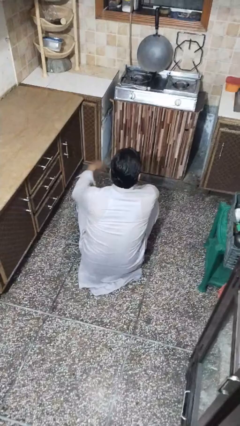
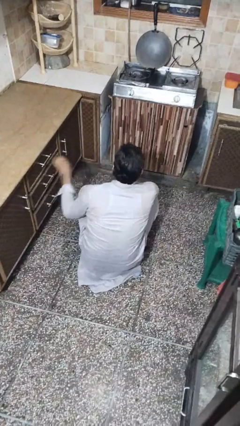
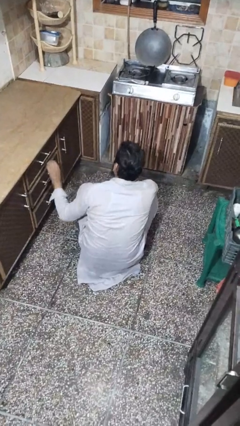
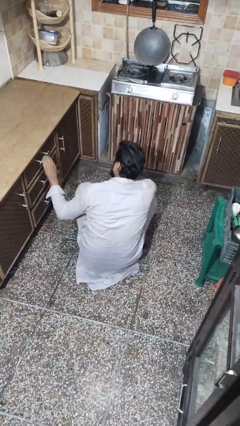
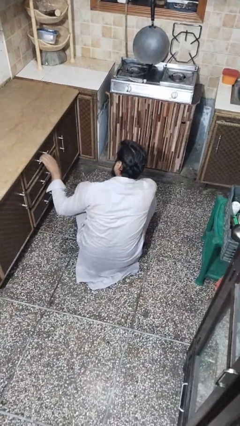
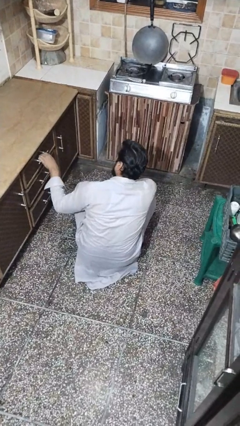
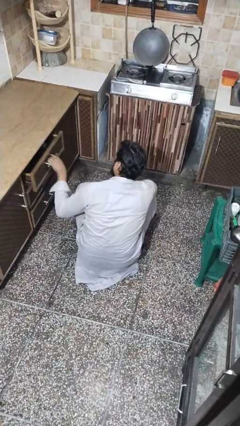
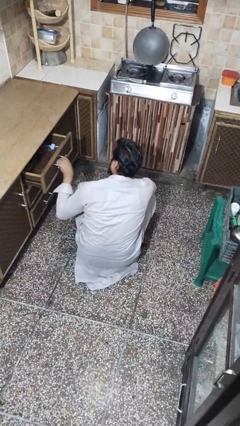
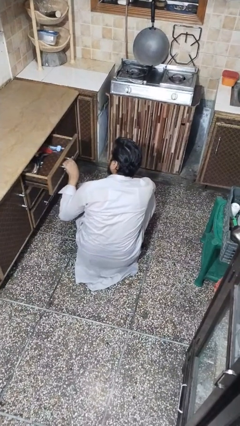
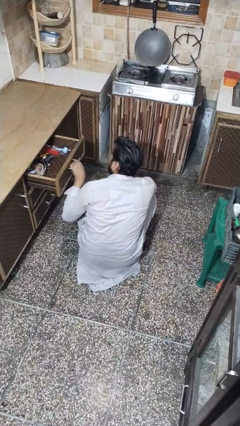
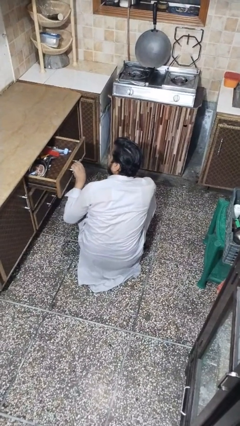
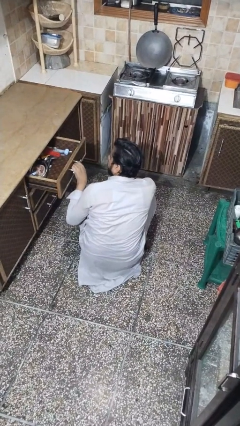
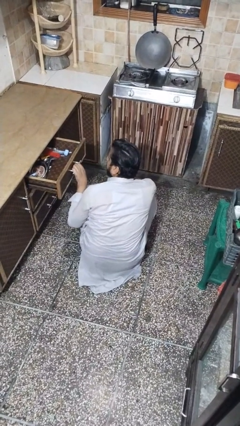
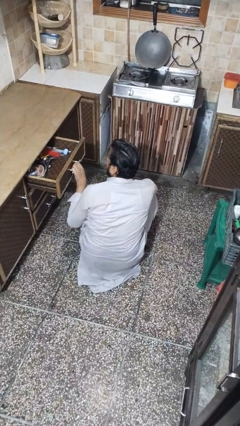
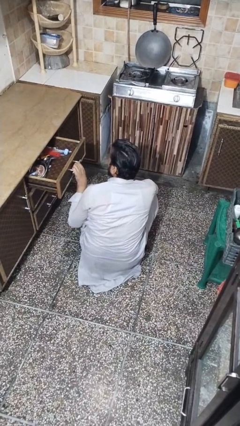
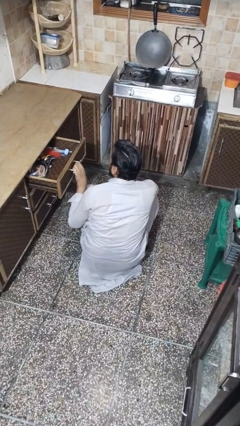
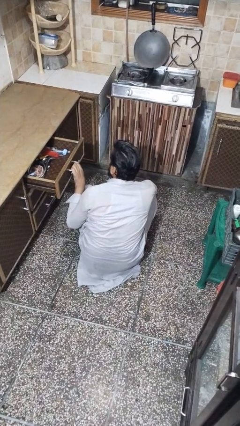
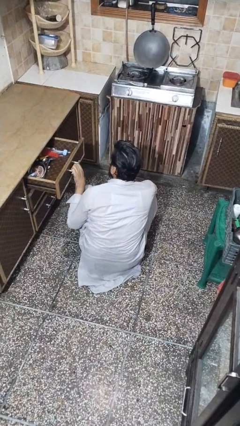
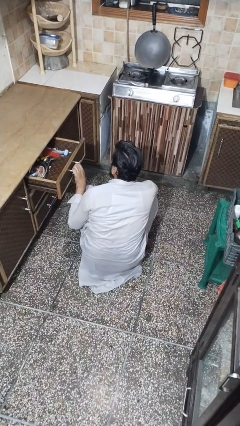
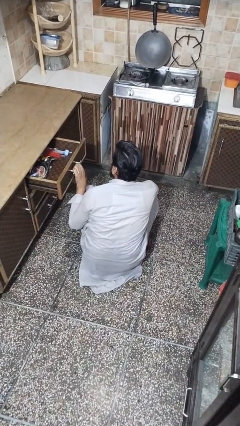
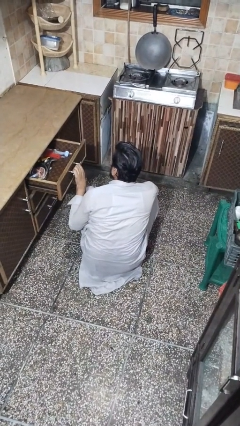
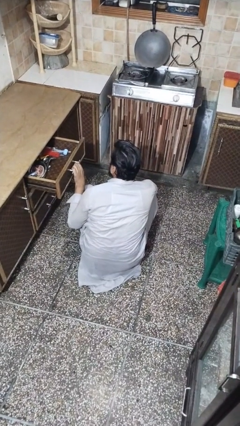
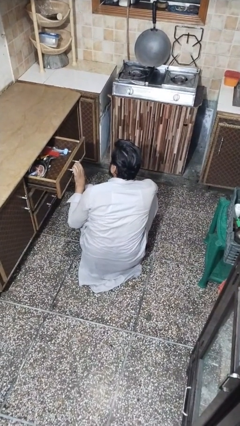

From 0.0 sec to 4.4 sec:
person opens kitchen drawer

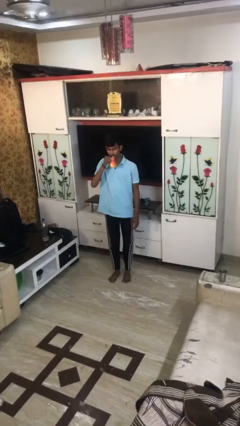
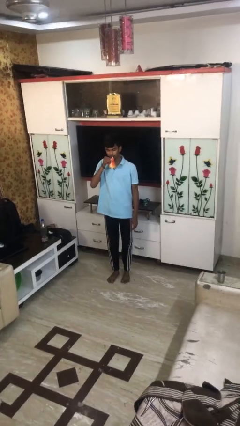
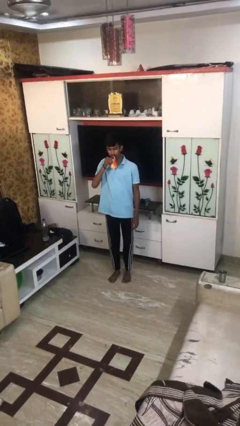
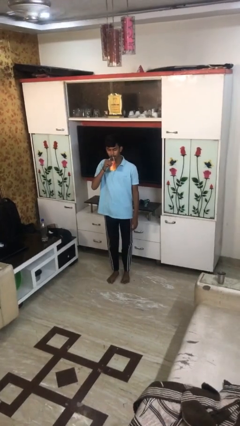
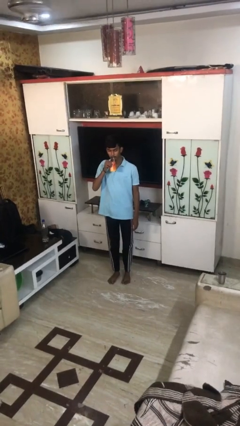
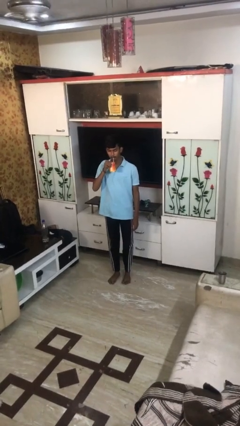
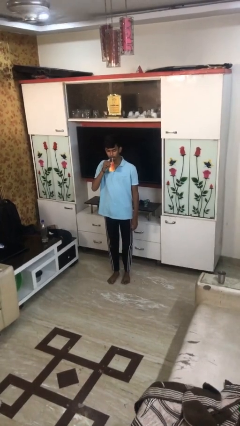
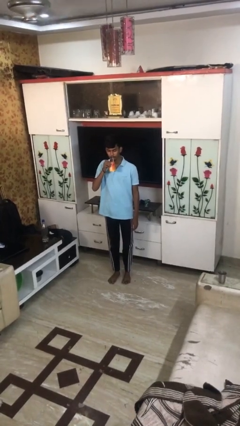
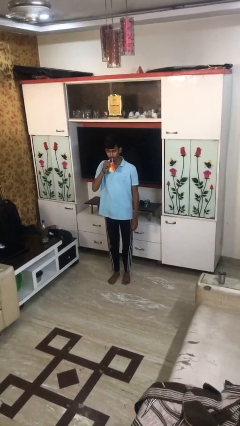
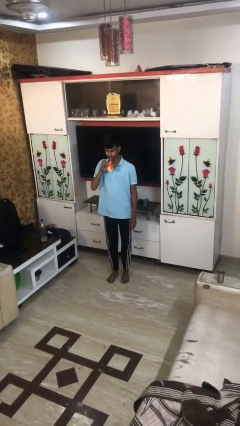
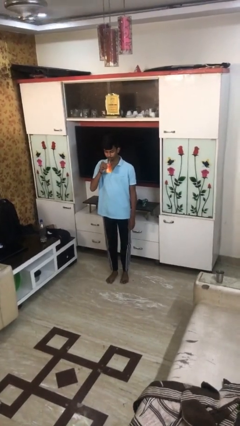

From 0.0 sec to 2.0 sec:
person drinks from straw

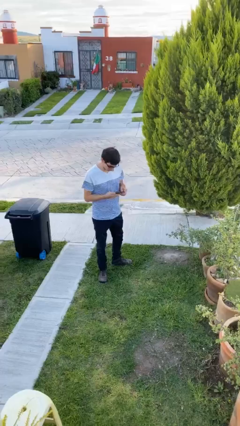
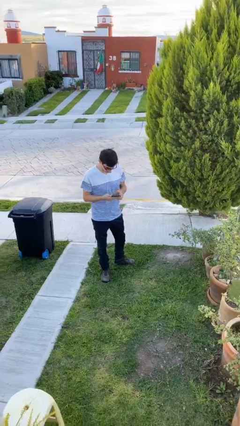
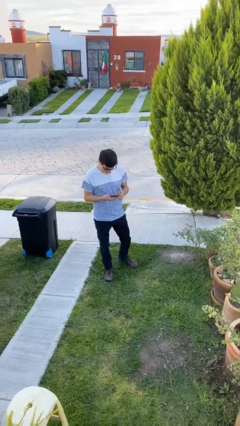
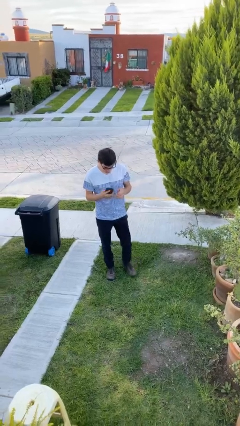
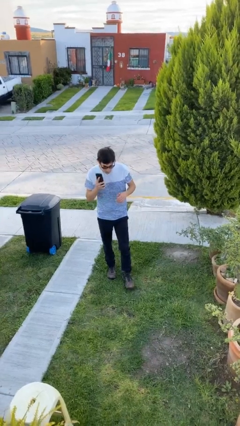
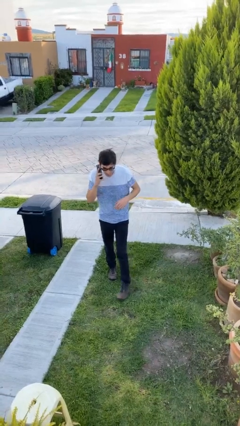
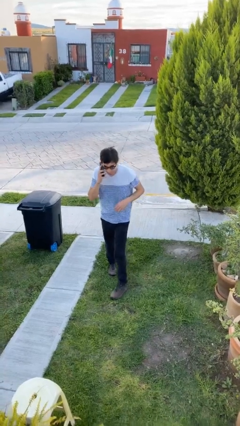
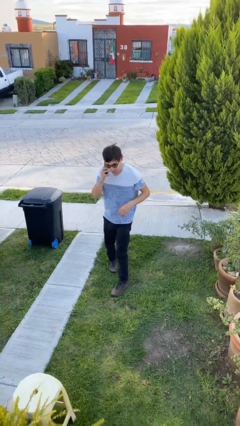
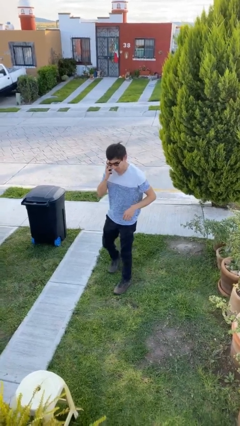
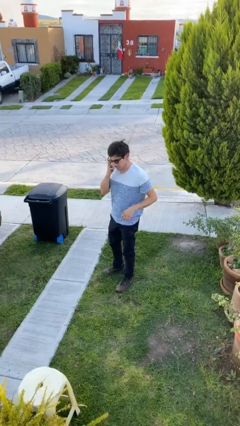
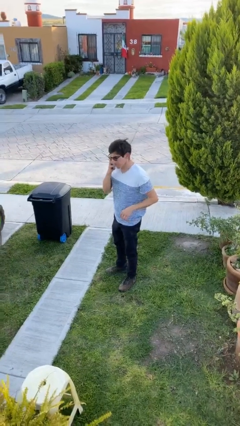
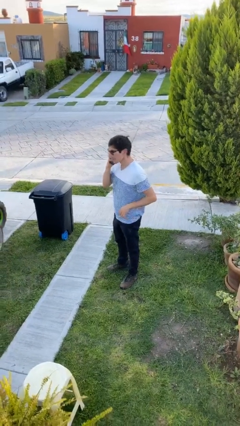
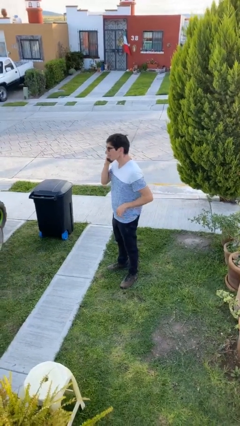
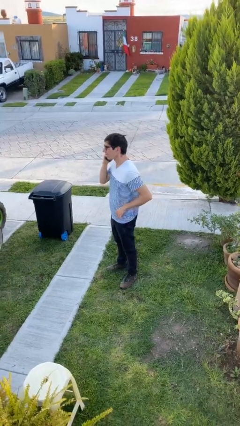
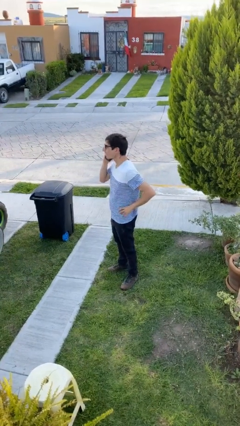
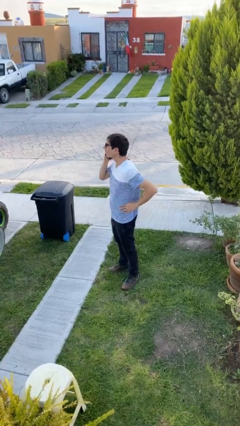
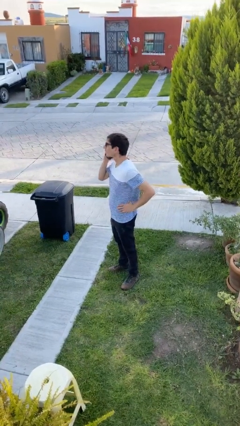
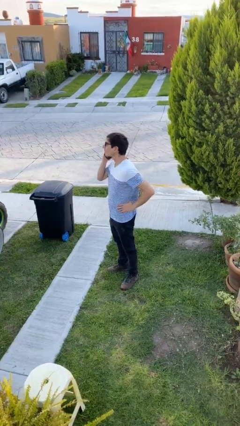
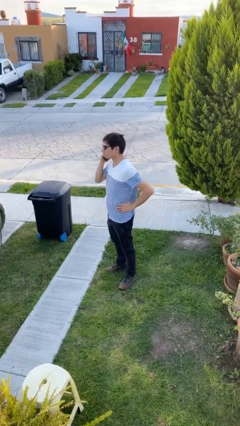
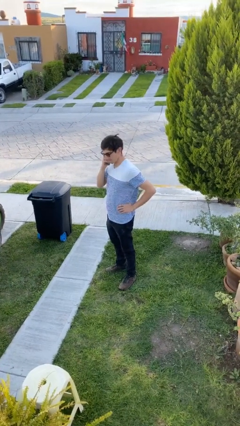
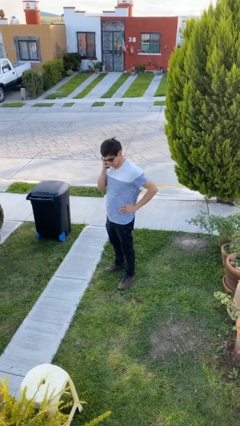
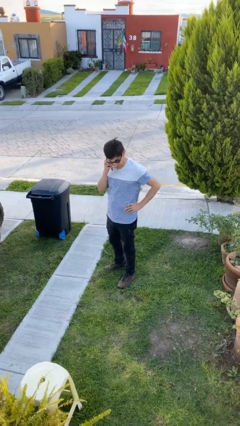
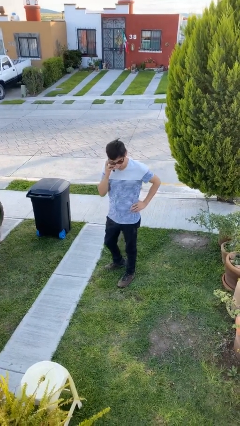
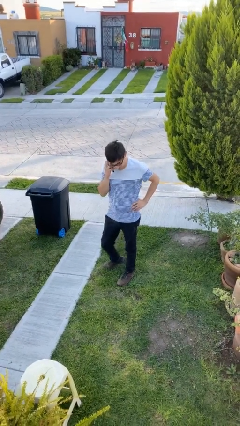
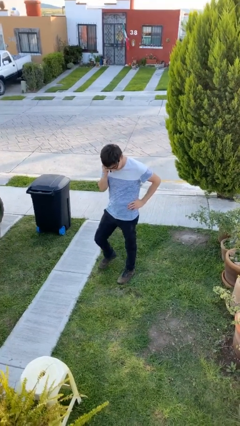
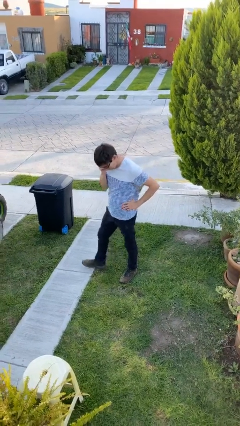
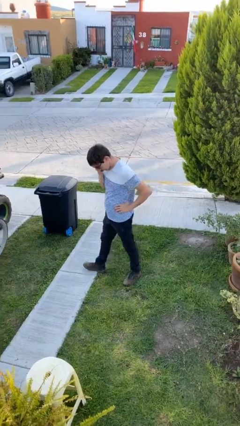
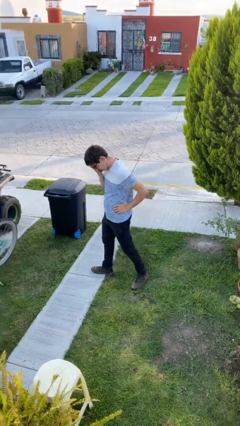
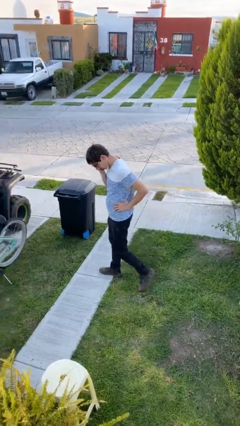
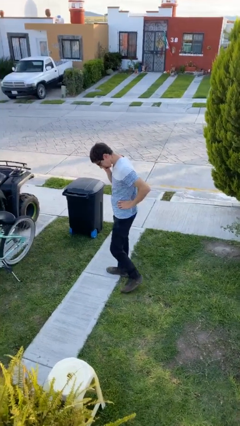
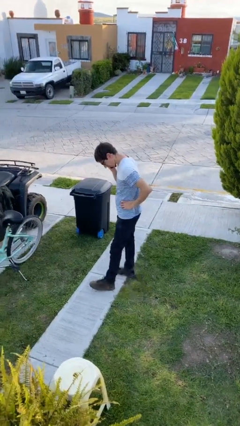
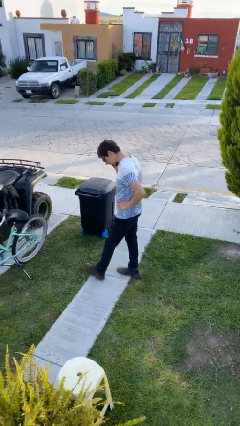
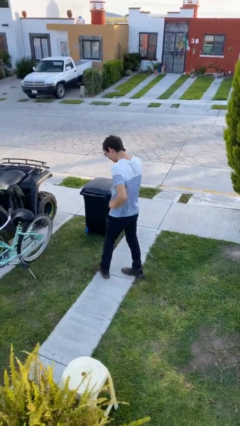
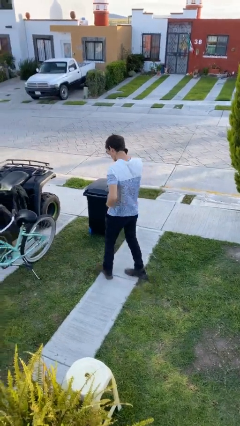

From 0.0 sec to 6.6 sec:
person talks on phone

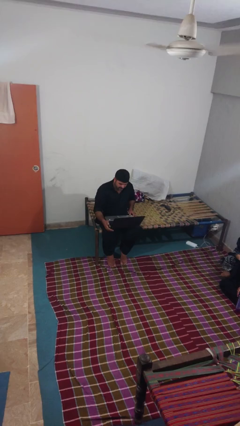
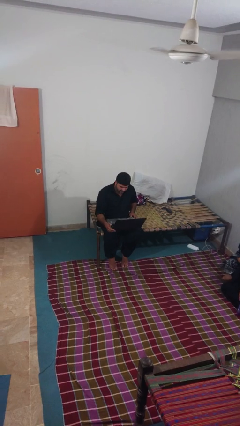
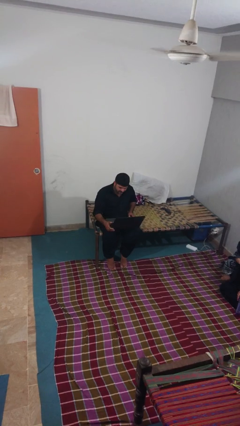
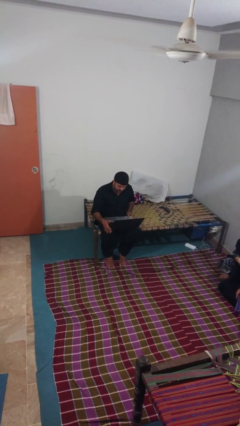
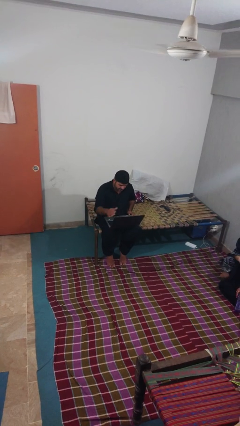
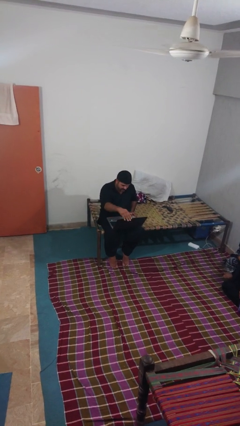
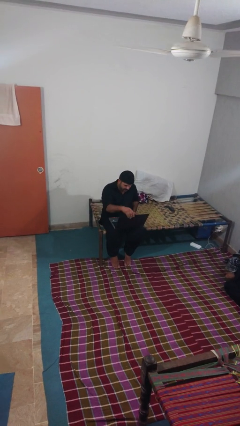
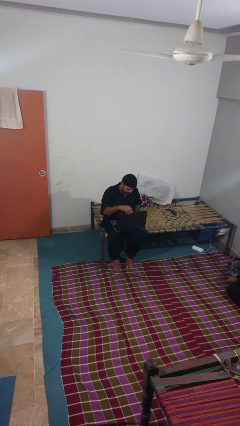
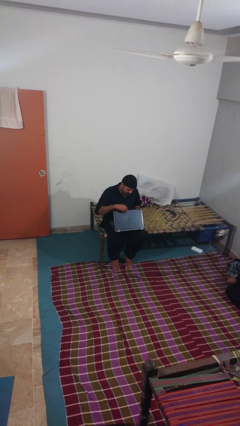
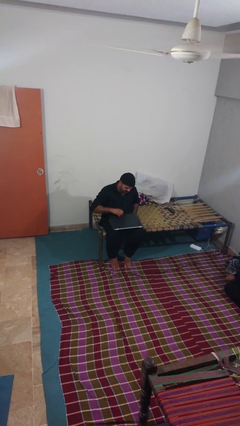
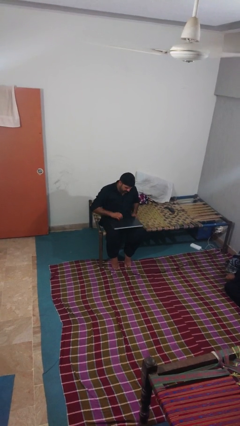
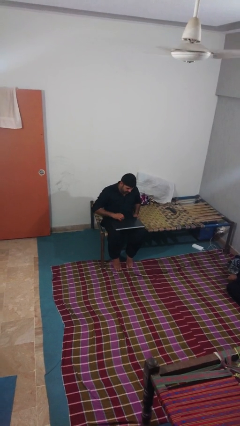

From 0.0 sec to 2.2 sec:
person closes laptop

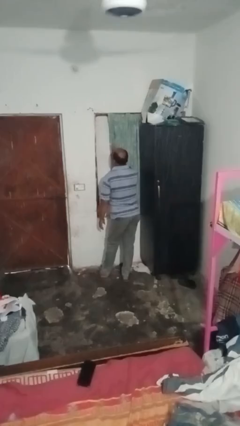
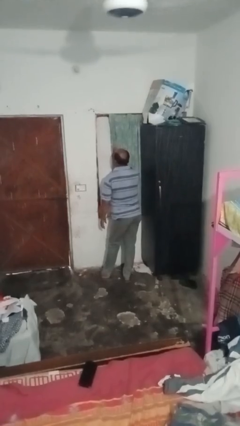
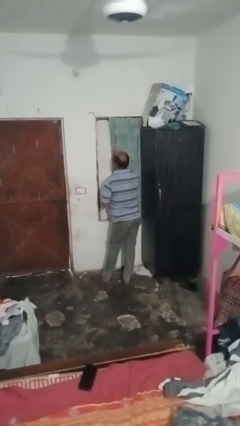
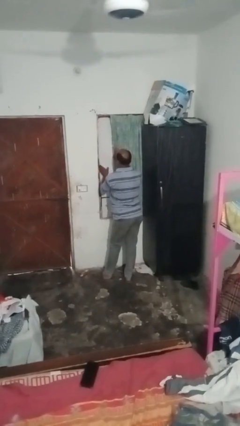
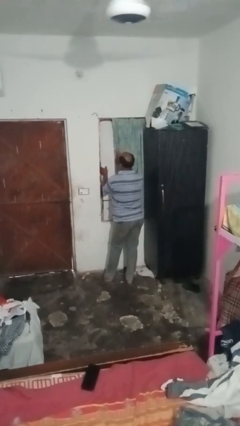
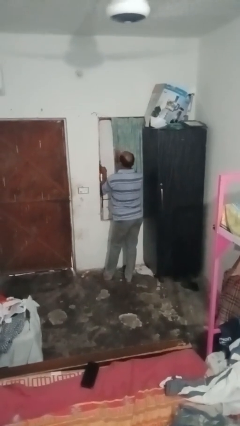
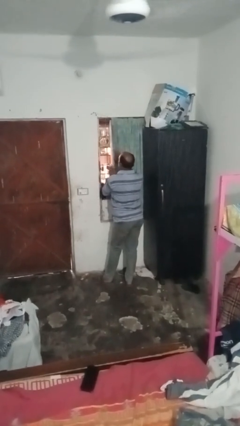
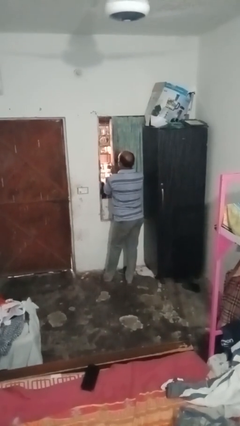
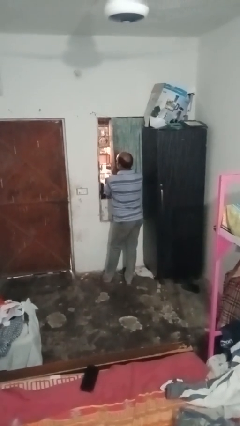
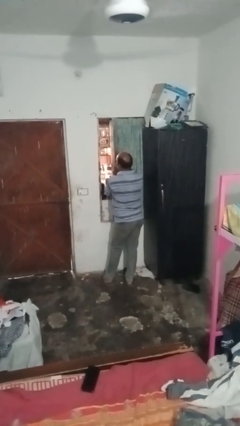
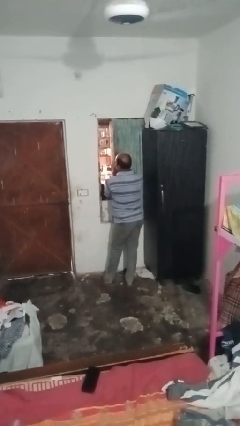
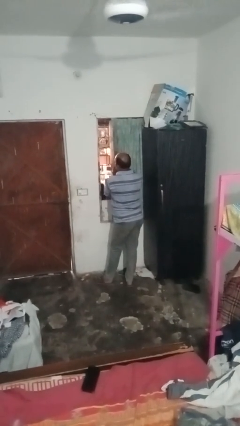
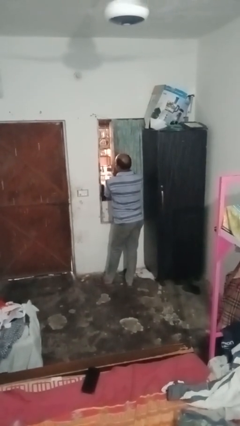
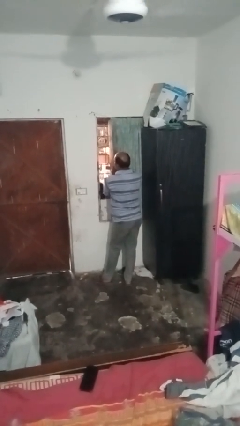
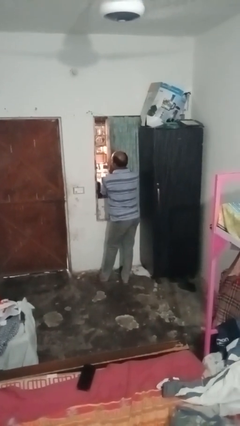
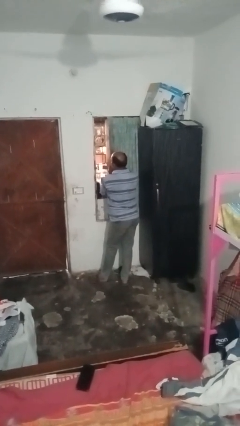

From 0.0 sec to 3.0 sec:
person opens home window
